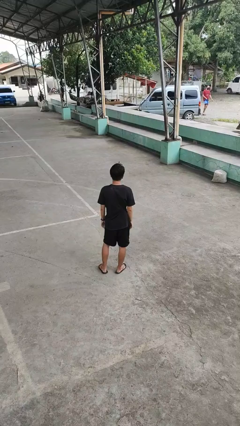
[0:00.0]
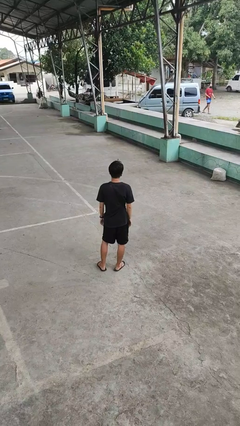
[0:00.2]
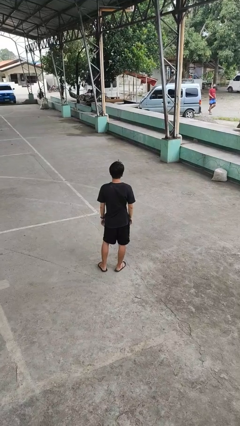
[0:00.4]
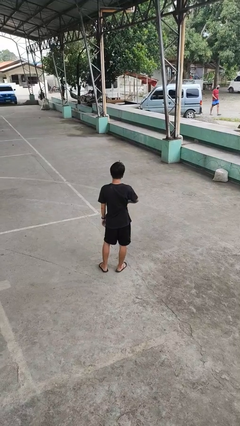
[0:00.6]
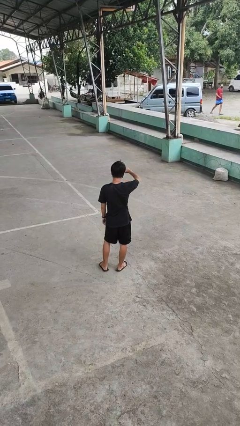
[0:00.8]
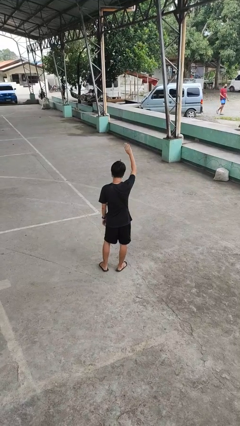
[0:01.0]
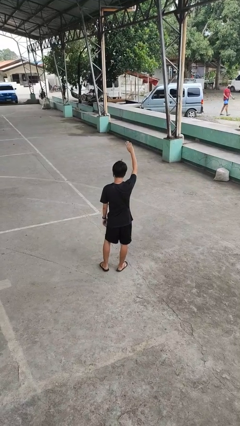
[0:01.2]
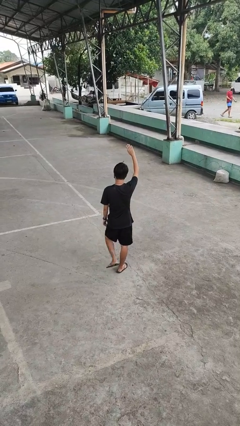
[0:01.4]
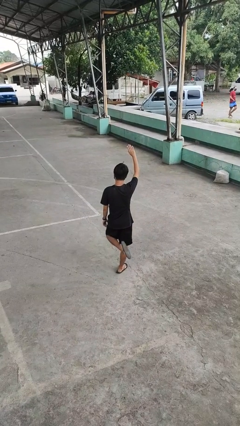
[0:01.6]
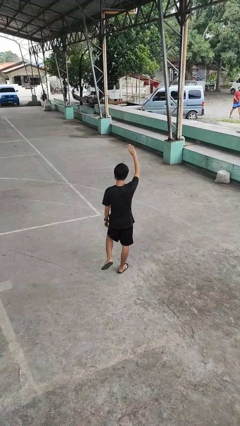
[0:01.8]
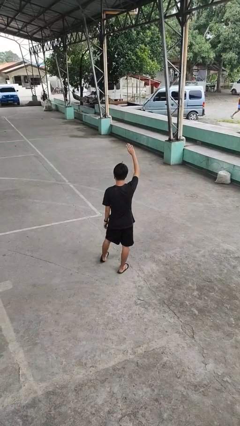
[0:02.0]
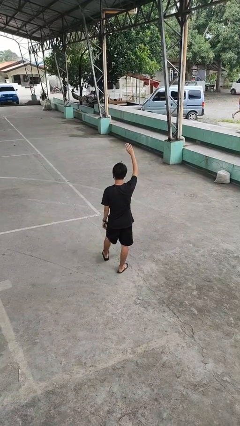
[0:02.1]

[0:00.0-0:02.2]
person gestures swipe up

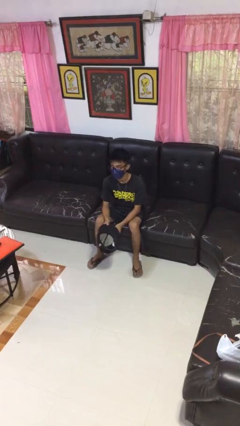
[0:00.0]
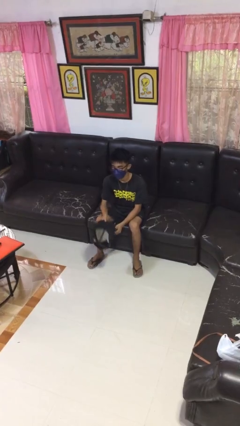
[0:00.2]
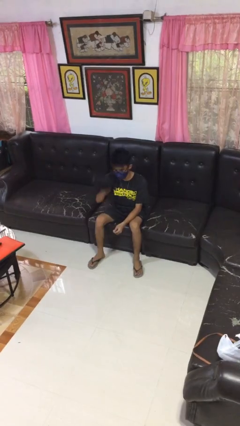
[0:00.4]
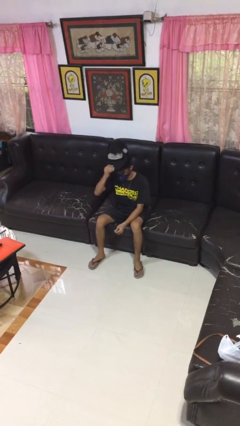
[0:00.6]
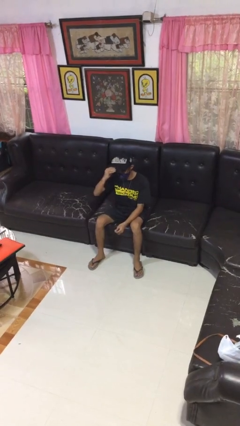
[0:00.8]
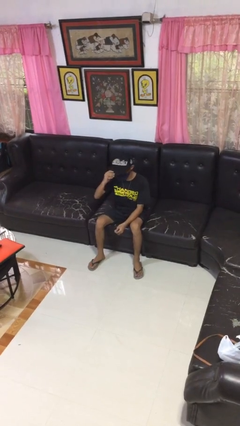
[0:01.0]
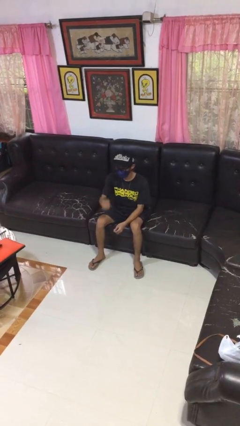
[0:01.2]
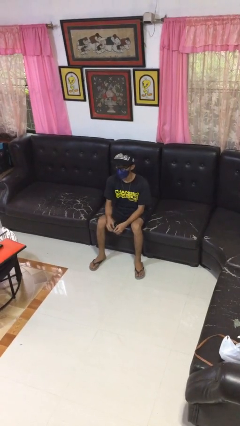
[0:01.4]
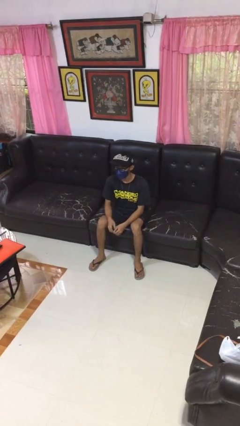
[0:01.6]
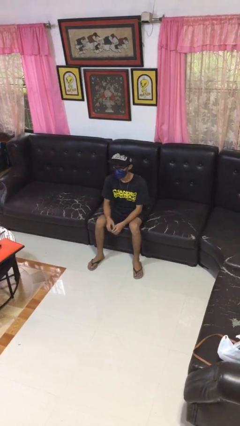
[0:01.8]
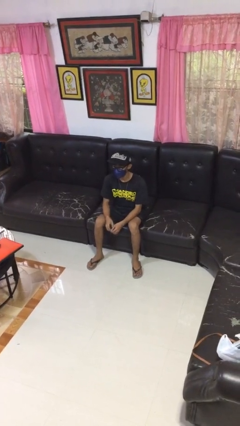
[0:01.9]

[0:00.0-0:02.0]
person puts on hat

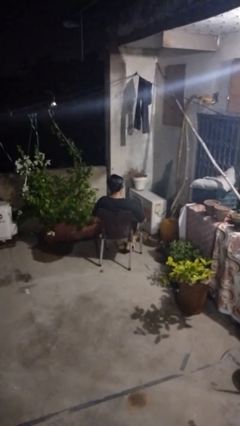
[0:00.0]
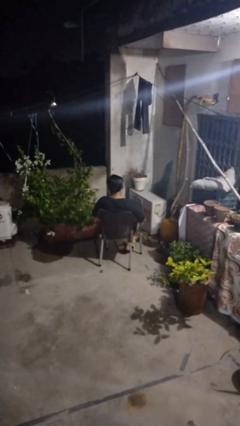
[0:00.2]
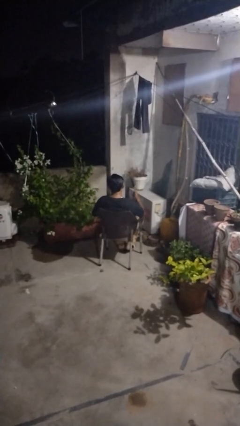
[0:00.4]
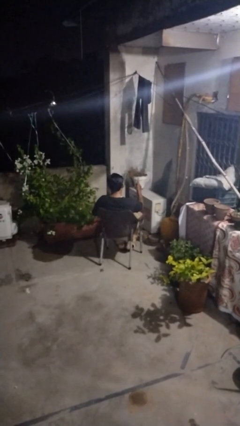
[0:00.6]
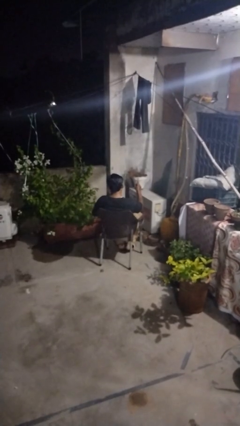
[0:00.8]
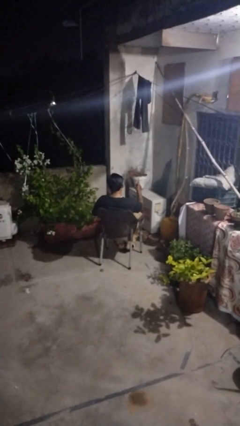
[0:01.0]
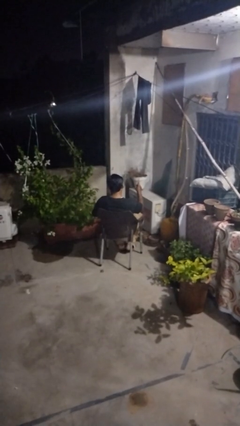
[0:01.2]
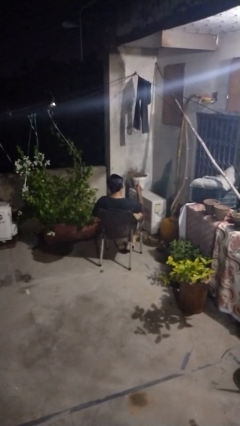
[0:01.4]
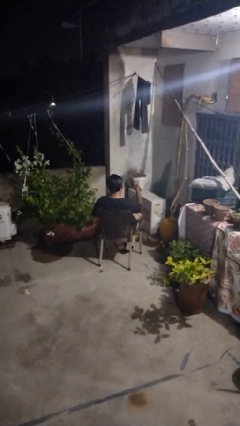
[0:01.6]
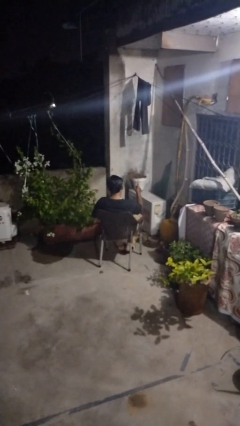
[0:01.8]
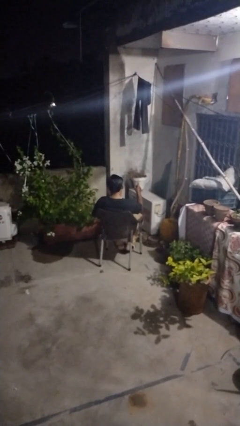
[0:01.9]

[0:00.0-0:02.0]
person gestures number one

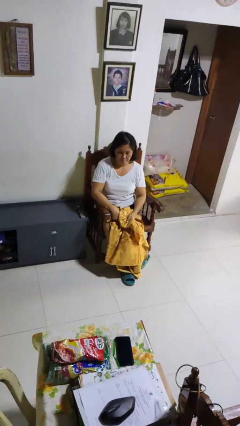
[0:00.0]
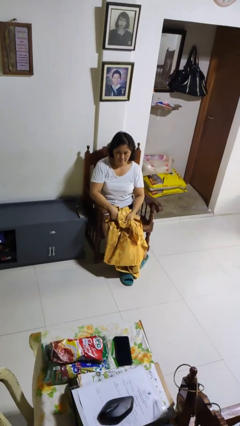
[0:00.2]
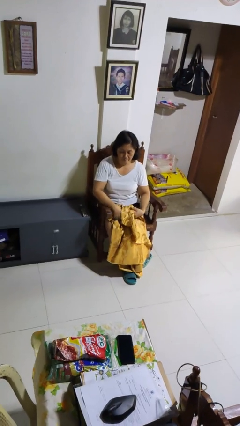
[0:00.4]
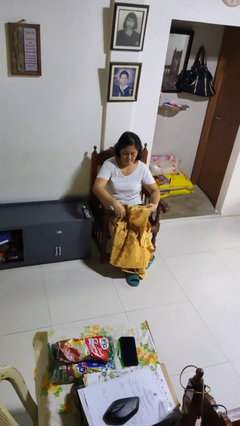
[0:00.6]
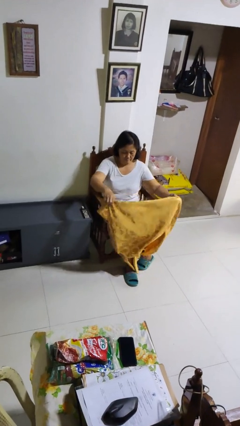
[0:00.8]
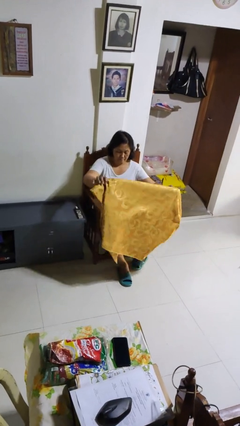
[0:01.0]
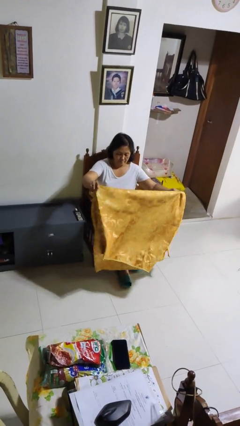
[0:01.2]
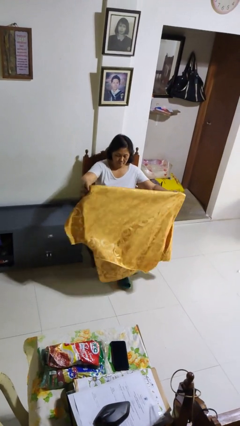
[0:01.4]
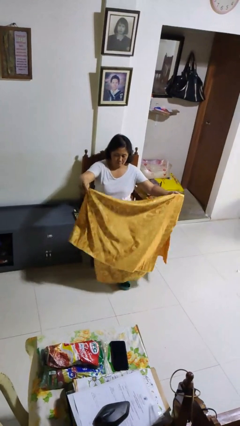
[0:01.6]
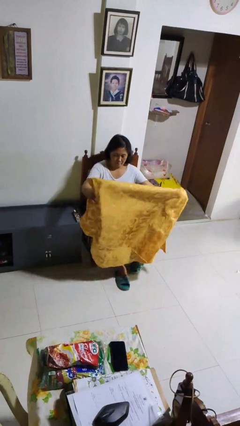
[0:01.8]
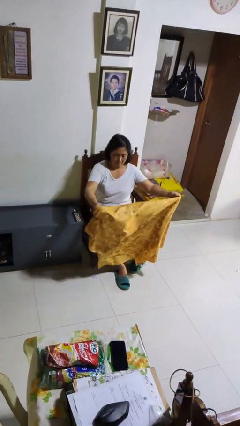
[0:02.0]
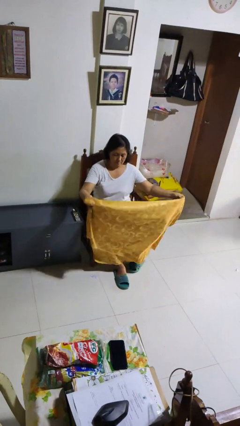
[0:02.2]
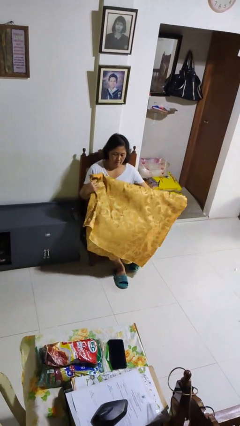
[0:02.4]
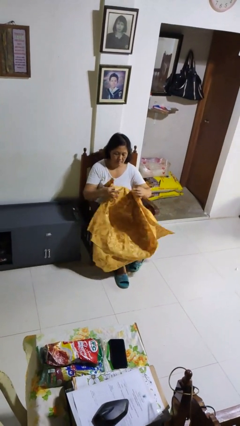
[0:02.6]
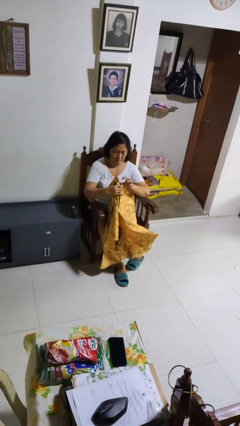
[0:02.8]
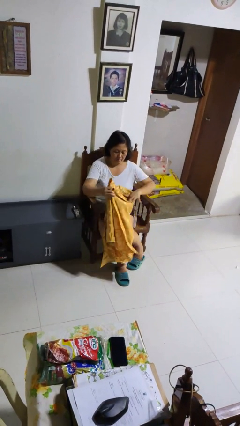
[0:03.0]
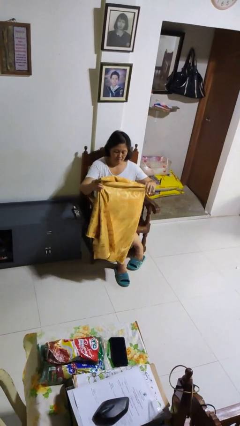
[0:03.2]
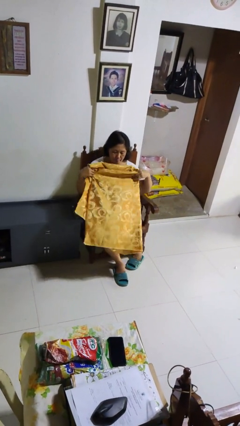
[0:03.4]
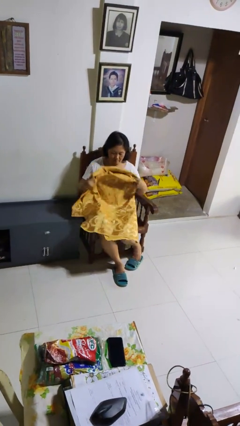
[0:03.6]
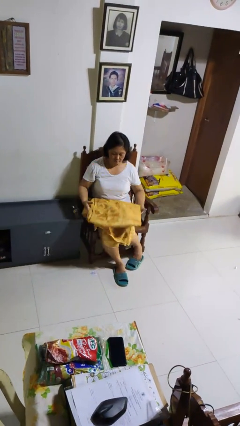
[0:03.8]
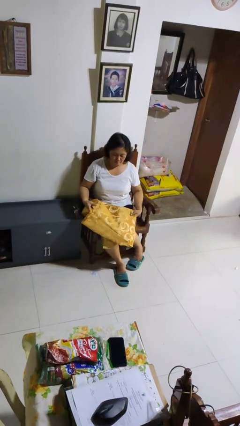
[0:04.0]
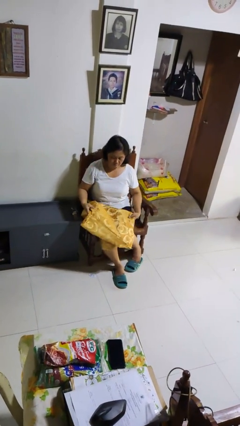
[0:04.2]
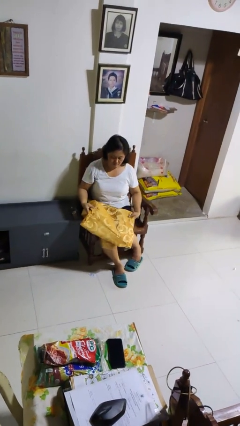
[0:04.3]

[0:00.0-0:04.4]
person folds blanket

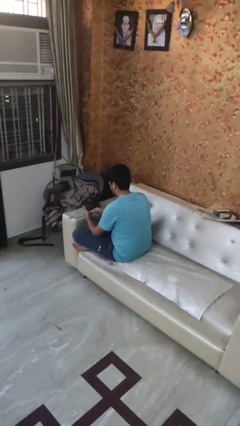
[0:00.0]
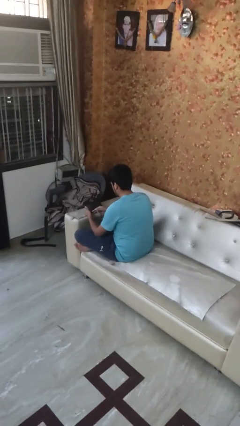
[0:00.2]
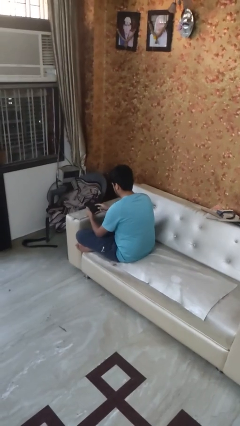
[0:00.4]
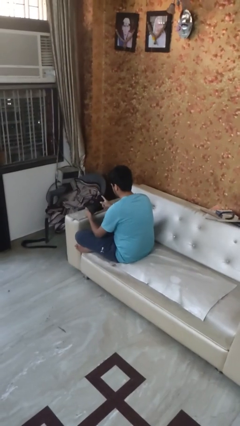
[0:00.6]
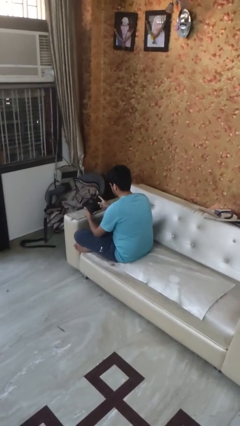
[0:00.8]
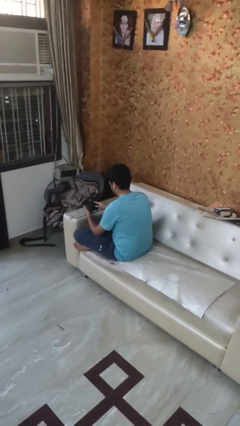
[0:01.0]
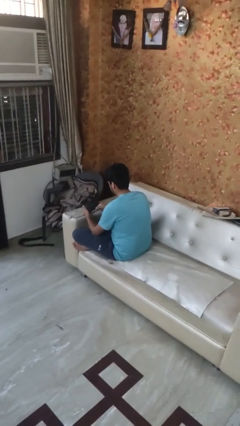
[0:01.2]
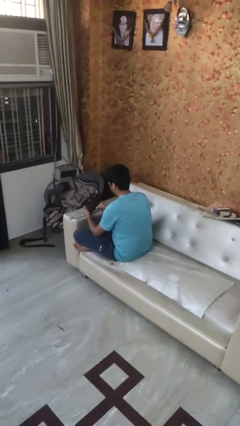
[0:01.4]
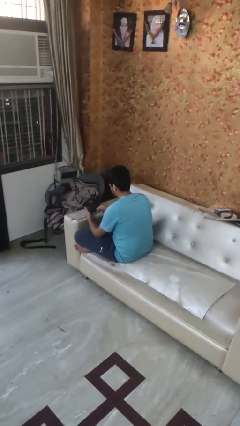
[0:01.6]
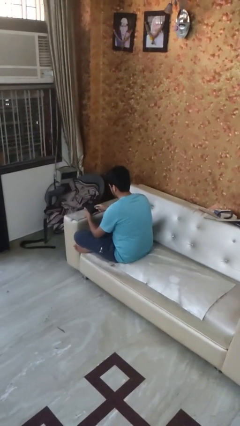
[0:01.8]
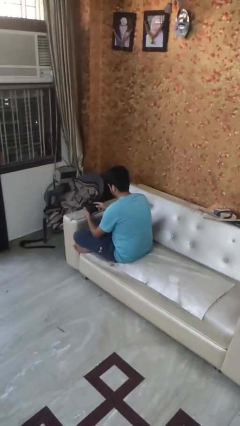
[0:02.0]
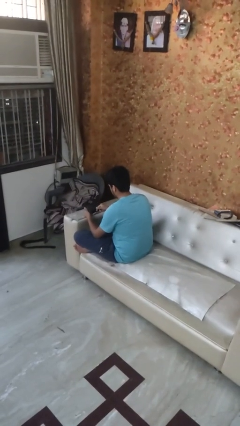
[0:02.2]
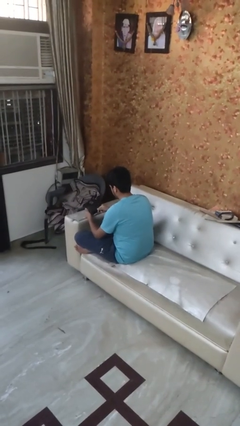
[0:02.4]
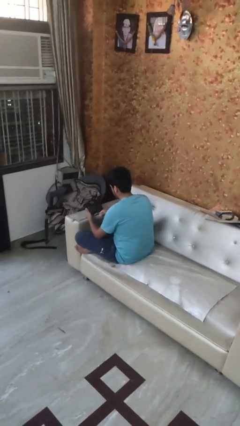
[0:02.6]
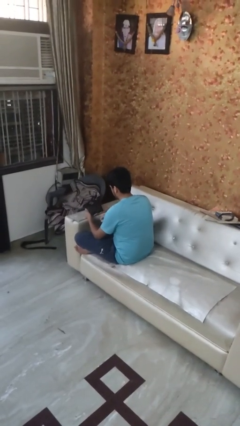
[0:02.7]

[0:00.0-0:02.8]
person interacts with tablet

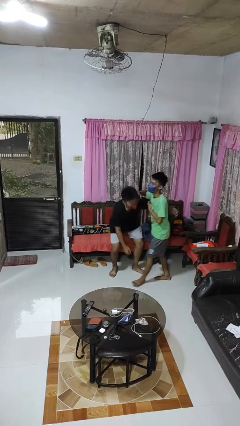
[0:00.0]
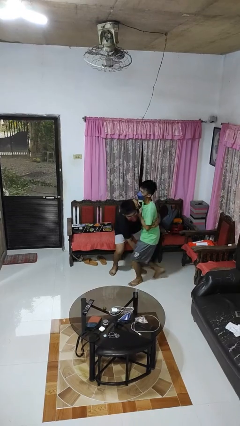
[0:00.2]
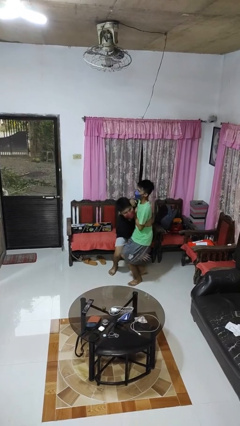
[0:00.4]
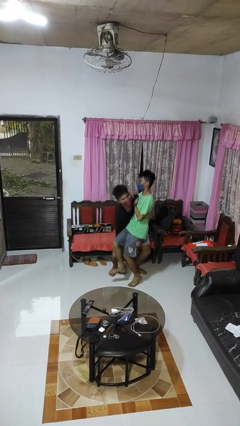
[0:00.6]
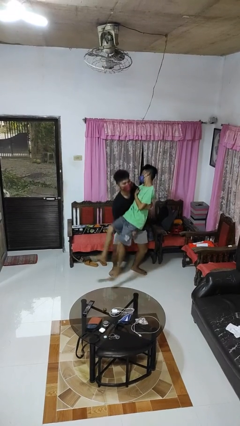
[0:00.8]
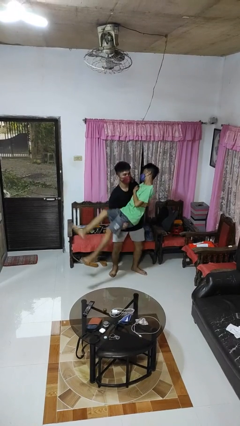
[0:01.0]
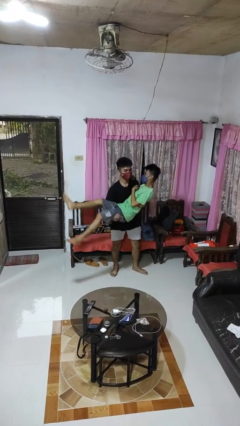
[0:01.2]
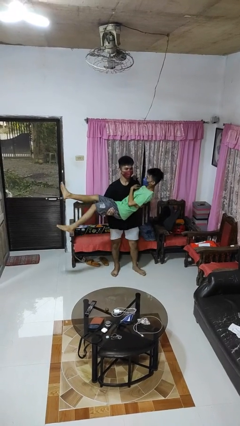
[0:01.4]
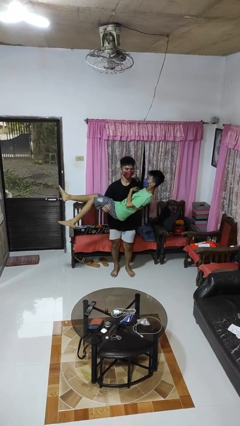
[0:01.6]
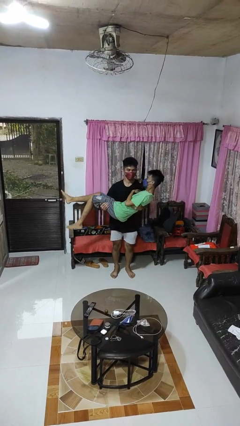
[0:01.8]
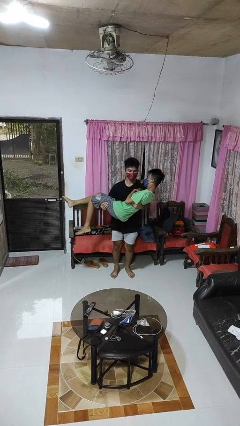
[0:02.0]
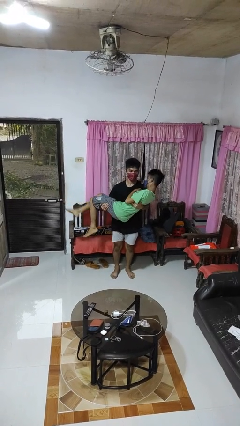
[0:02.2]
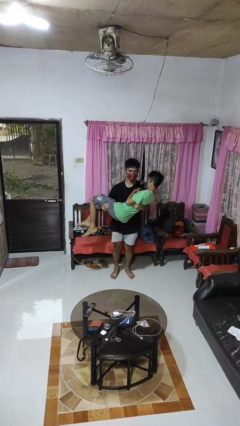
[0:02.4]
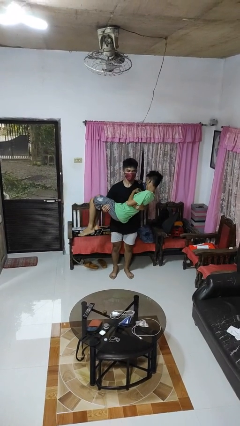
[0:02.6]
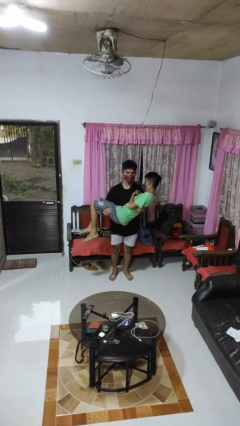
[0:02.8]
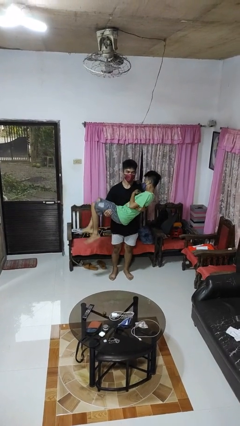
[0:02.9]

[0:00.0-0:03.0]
person picks up person

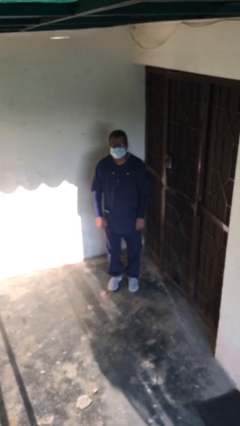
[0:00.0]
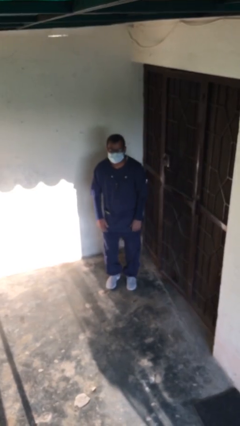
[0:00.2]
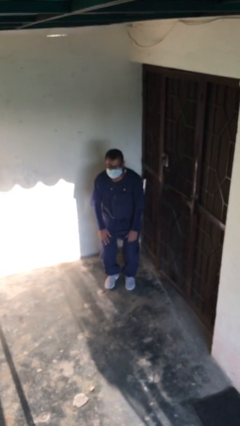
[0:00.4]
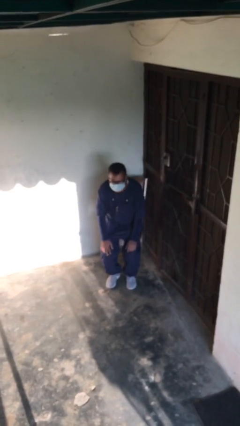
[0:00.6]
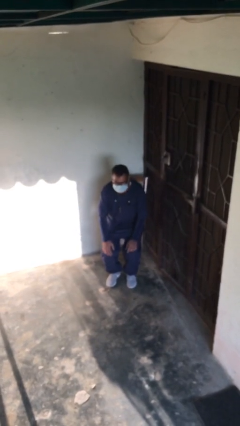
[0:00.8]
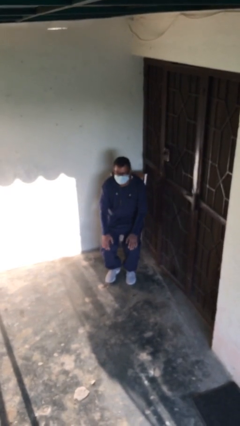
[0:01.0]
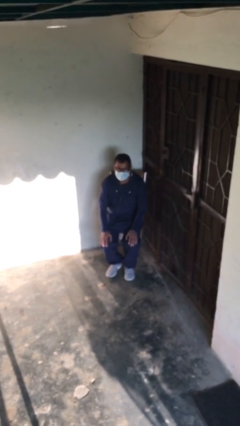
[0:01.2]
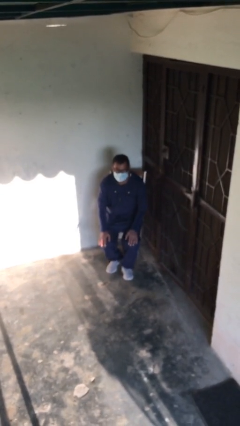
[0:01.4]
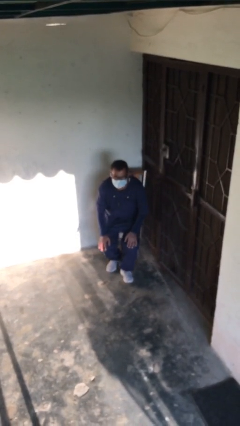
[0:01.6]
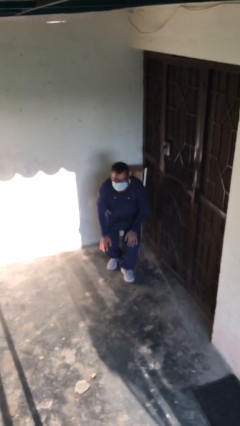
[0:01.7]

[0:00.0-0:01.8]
person sits down
